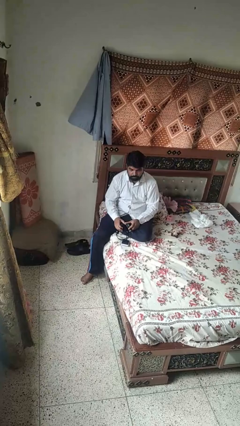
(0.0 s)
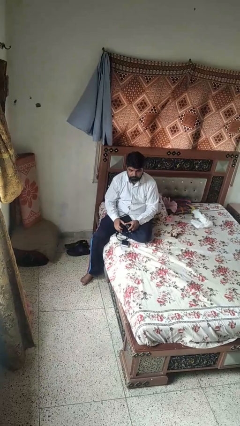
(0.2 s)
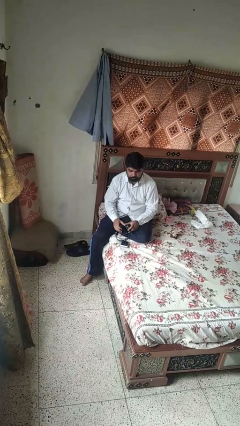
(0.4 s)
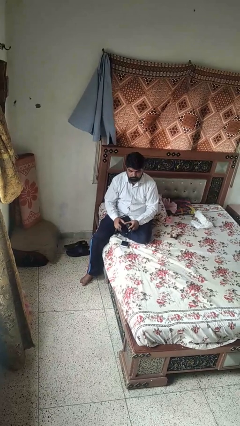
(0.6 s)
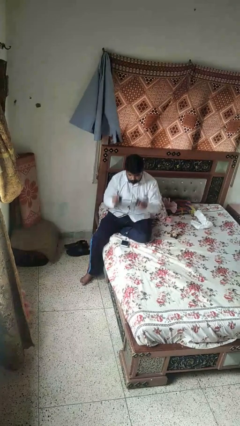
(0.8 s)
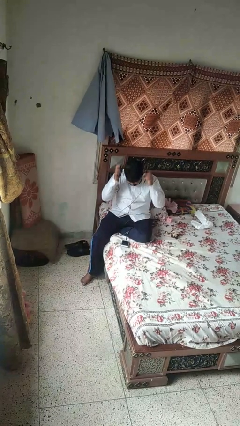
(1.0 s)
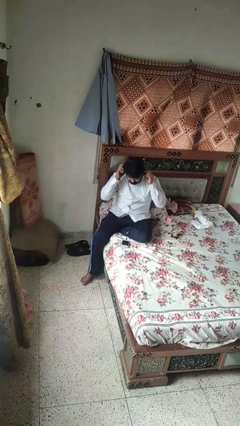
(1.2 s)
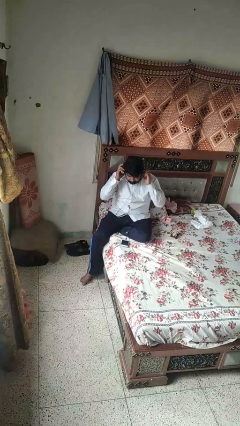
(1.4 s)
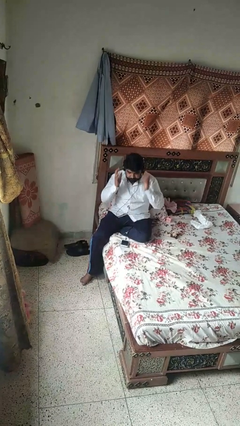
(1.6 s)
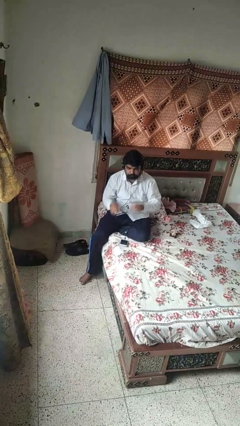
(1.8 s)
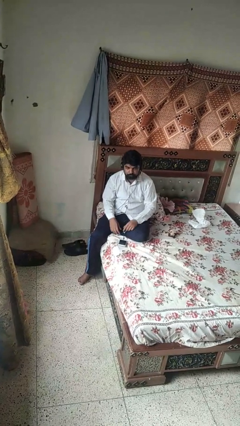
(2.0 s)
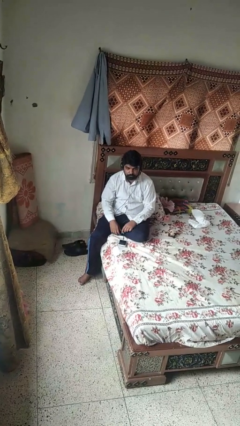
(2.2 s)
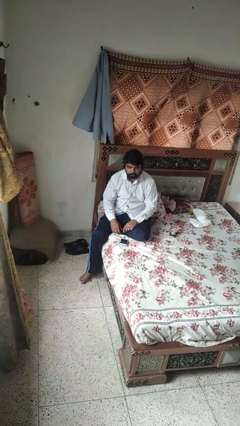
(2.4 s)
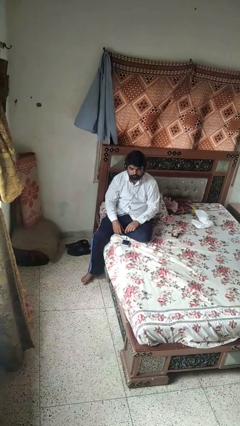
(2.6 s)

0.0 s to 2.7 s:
person puts on headphones

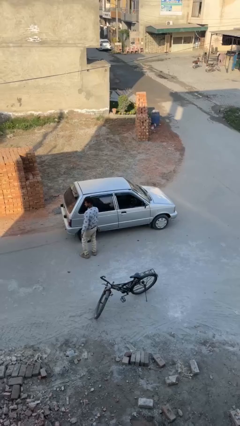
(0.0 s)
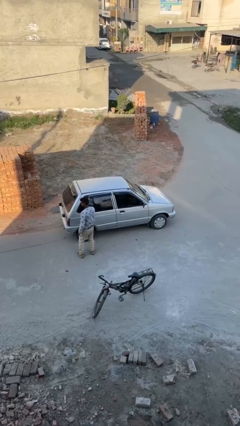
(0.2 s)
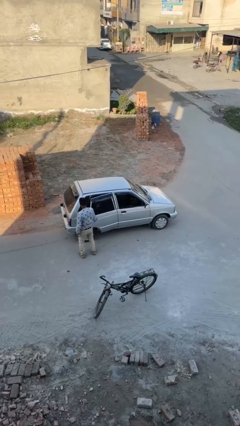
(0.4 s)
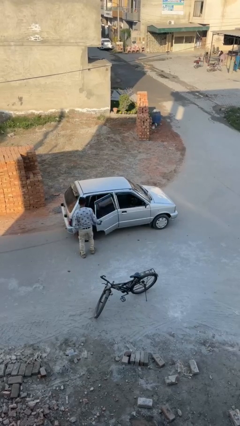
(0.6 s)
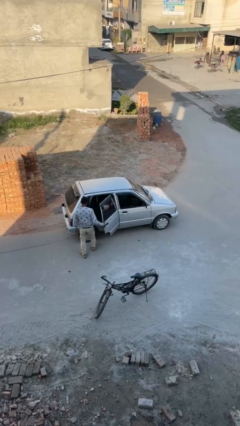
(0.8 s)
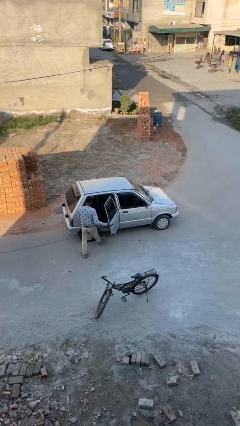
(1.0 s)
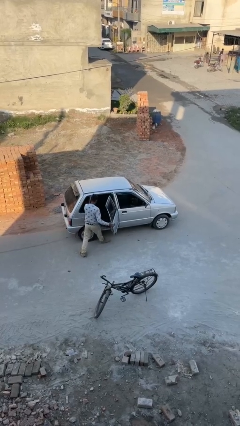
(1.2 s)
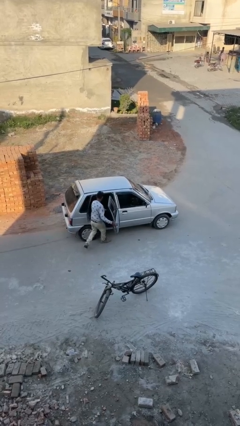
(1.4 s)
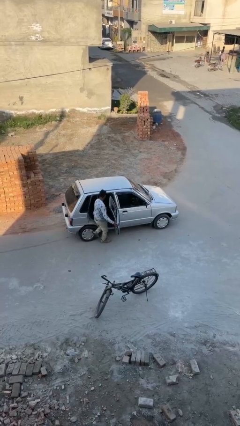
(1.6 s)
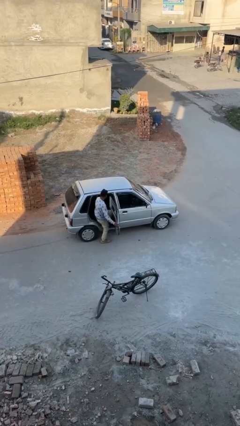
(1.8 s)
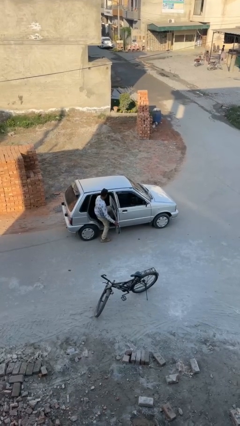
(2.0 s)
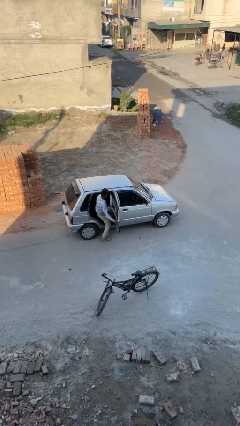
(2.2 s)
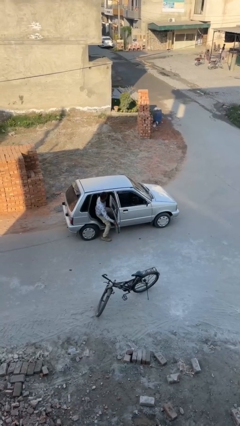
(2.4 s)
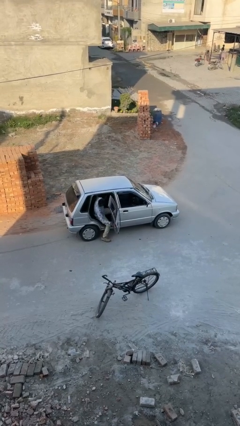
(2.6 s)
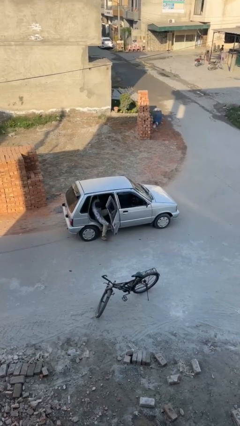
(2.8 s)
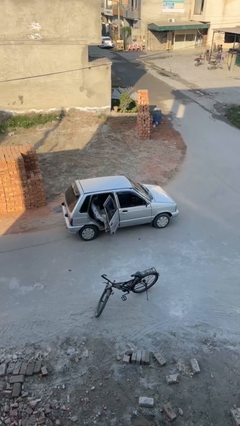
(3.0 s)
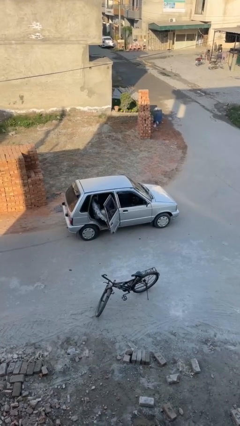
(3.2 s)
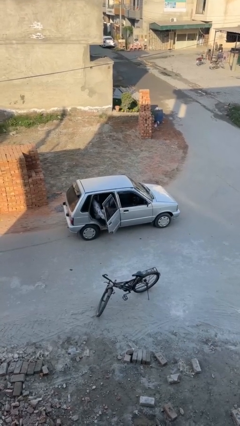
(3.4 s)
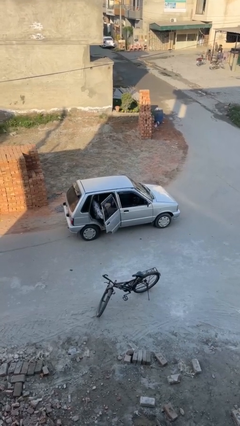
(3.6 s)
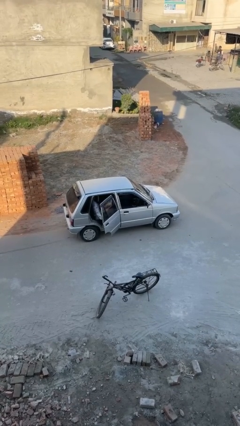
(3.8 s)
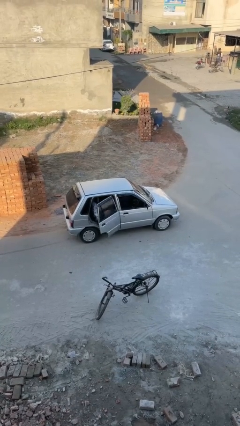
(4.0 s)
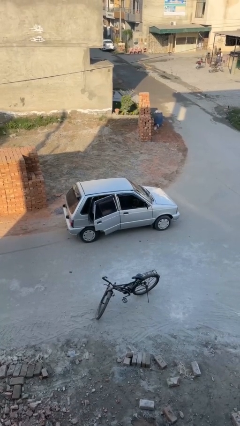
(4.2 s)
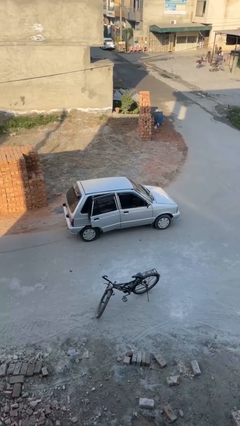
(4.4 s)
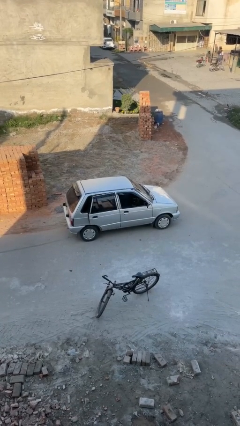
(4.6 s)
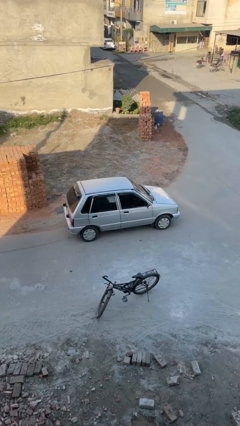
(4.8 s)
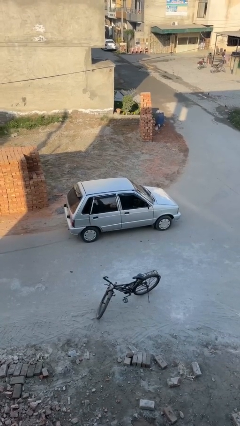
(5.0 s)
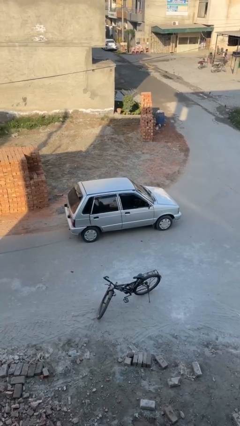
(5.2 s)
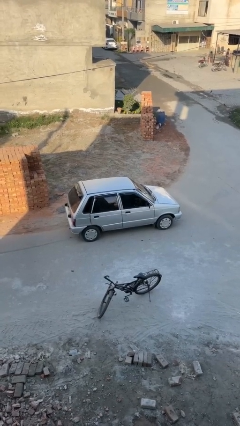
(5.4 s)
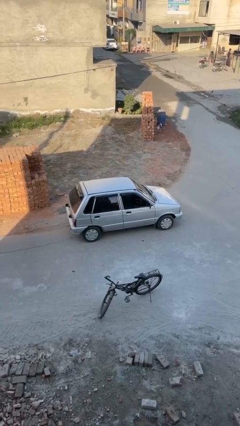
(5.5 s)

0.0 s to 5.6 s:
car picks up person

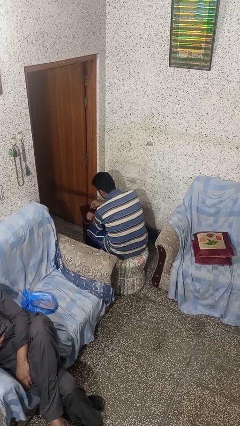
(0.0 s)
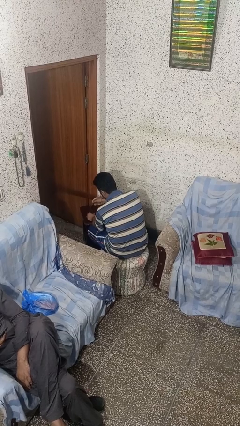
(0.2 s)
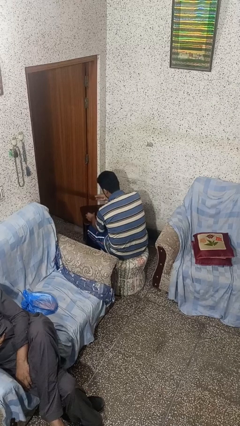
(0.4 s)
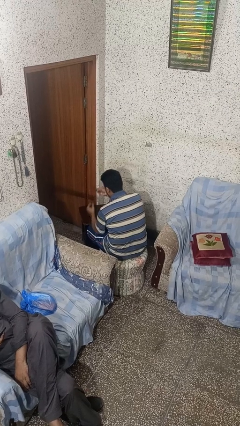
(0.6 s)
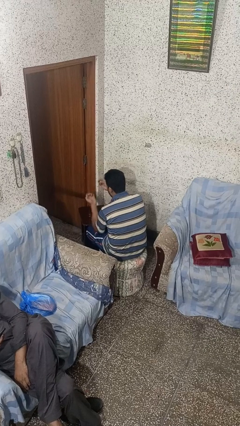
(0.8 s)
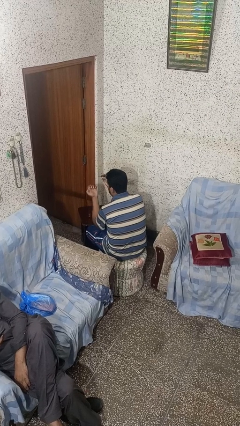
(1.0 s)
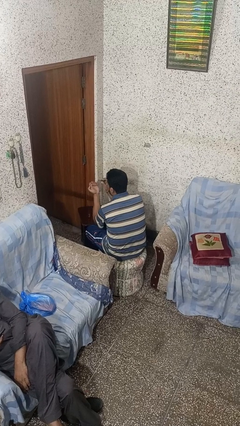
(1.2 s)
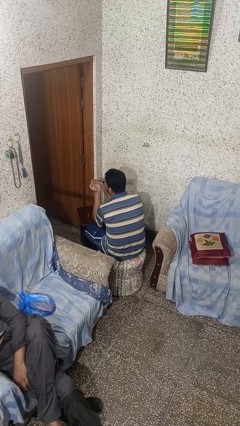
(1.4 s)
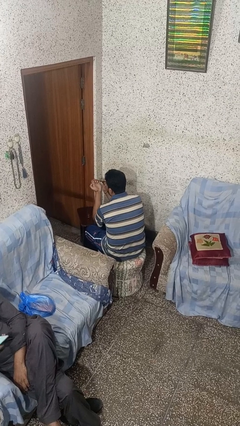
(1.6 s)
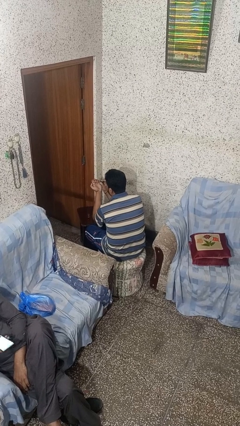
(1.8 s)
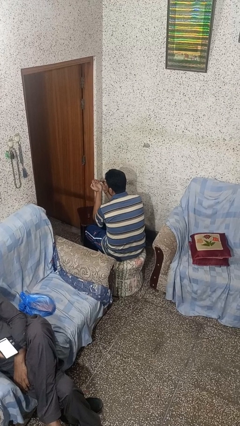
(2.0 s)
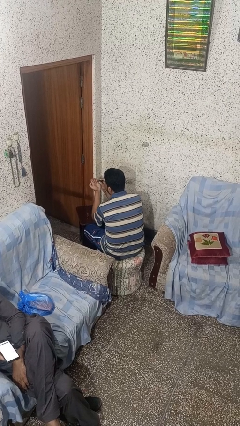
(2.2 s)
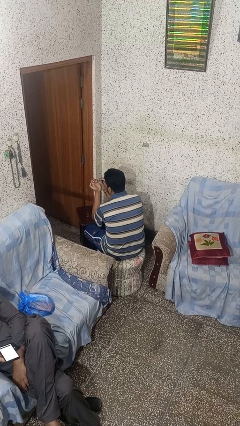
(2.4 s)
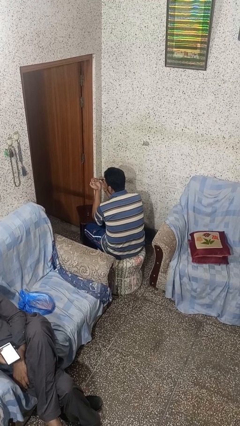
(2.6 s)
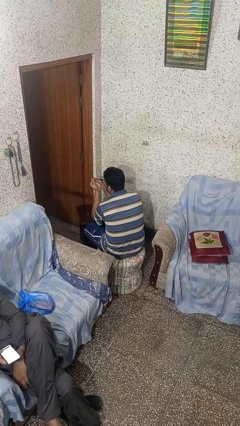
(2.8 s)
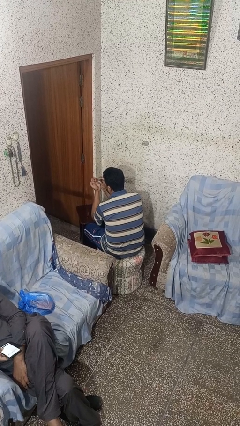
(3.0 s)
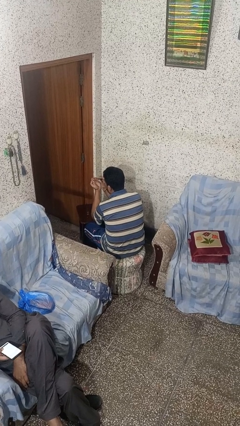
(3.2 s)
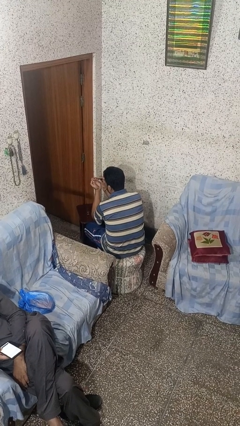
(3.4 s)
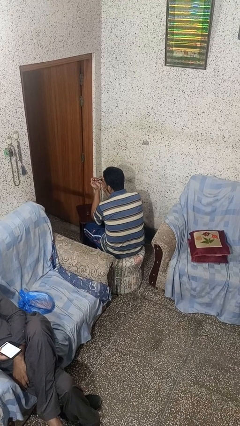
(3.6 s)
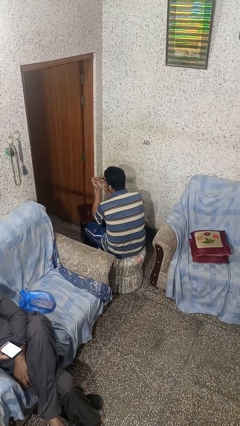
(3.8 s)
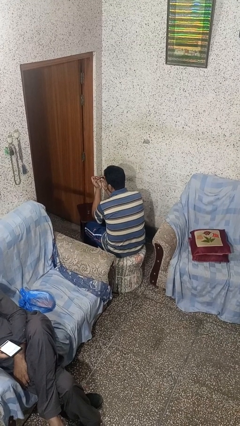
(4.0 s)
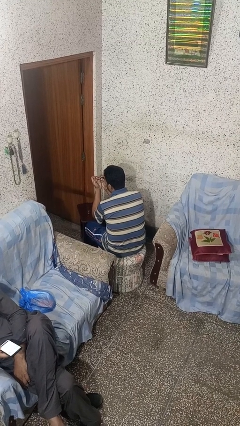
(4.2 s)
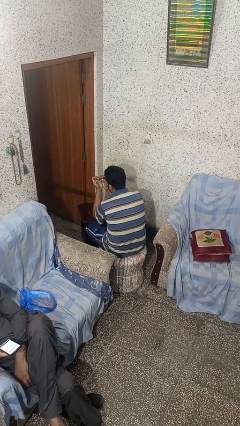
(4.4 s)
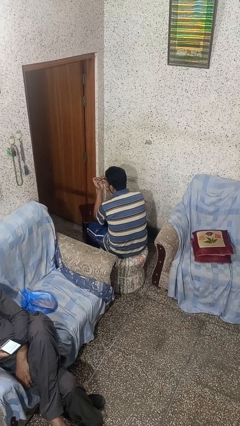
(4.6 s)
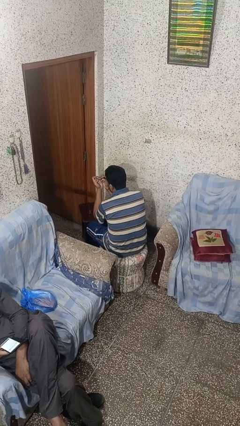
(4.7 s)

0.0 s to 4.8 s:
person paints fingernails

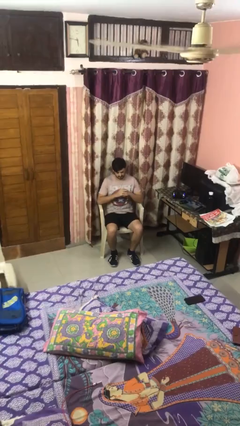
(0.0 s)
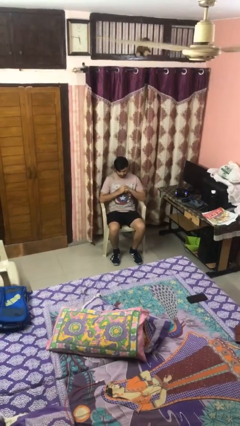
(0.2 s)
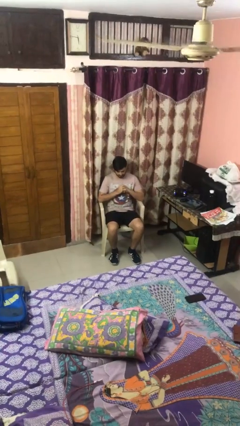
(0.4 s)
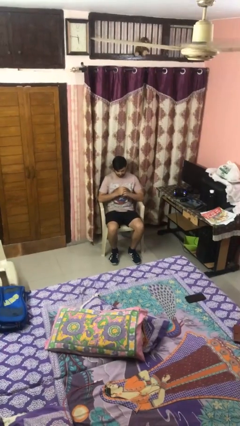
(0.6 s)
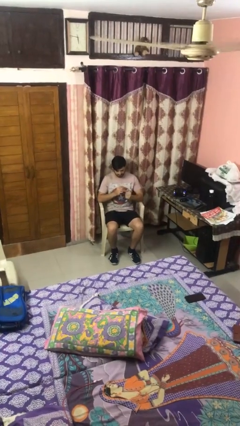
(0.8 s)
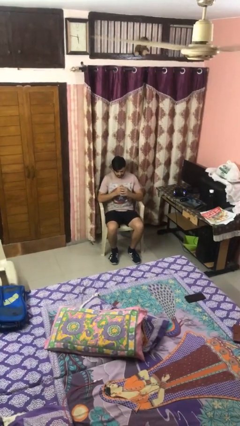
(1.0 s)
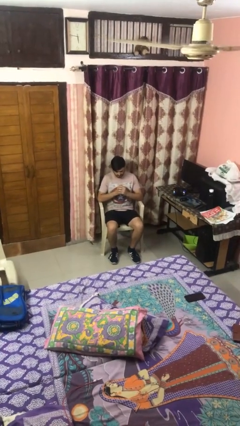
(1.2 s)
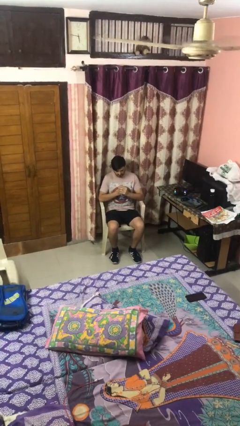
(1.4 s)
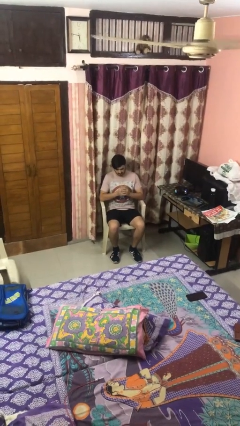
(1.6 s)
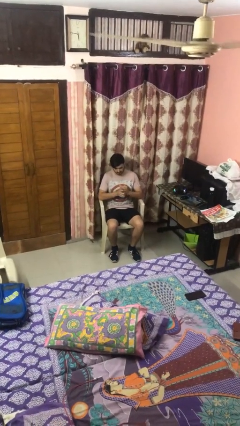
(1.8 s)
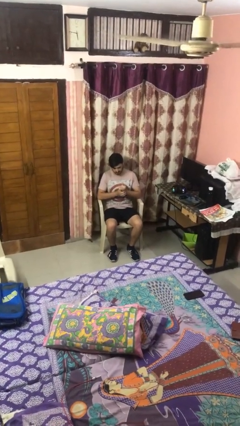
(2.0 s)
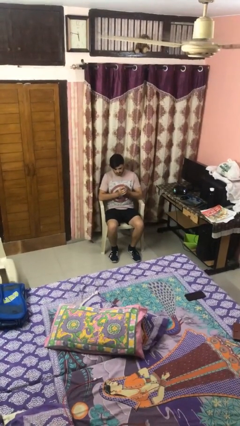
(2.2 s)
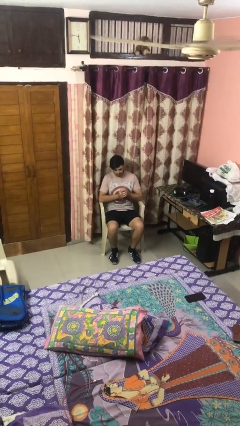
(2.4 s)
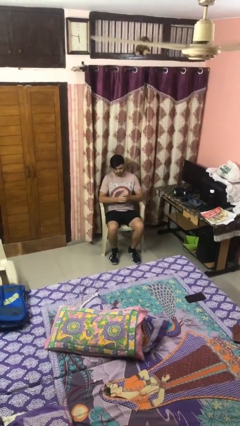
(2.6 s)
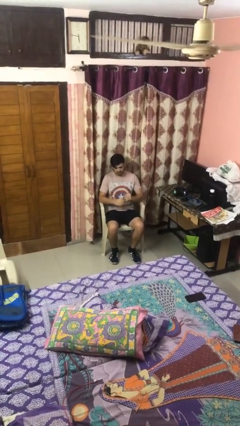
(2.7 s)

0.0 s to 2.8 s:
person cracks knuckles

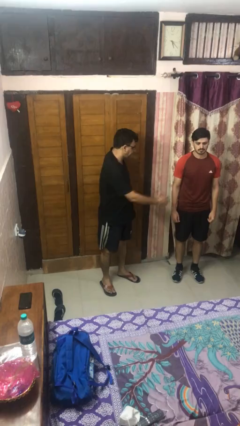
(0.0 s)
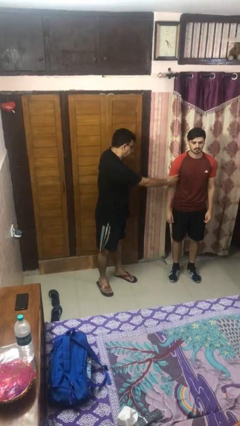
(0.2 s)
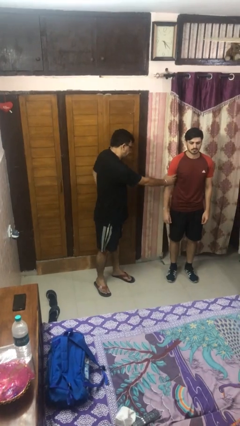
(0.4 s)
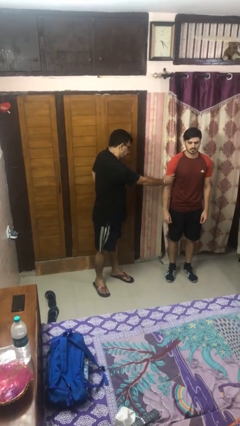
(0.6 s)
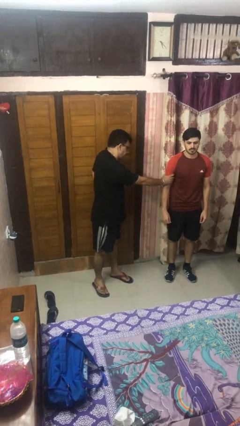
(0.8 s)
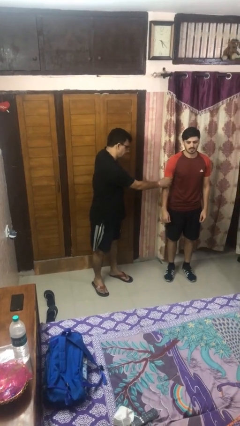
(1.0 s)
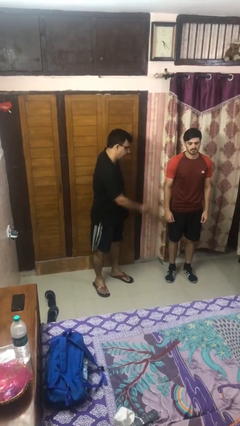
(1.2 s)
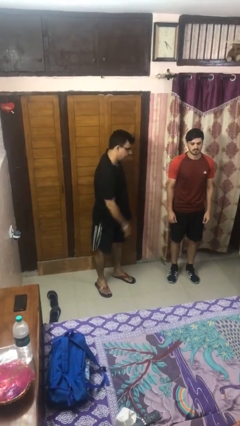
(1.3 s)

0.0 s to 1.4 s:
person grabs person by bicep
